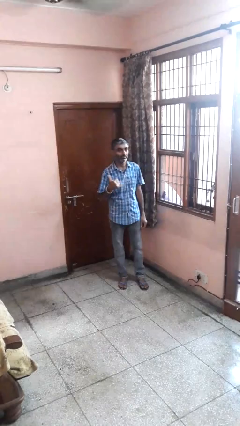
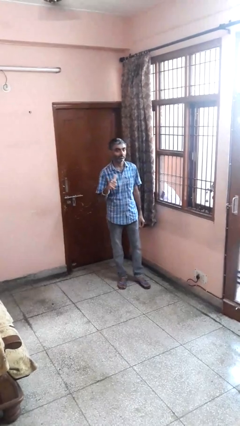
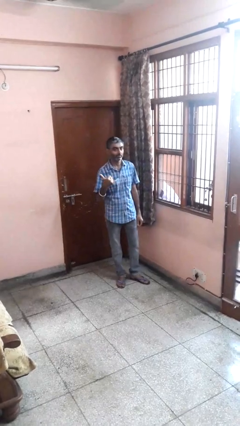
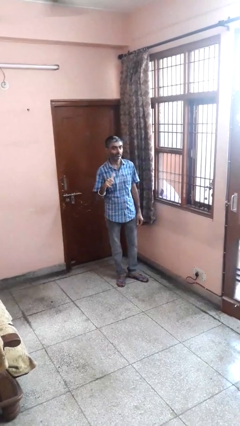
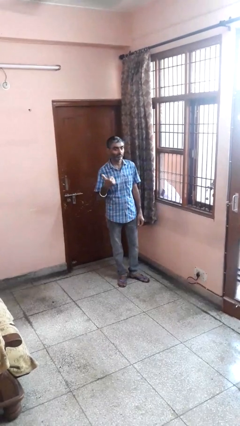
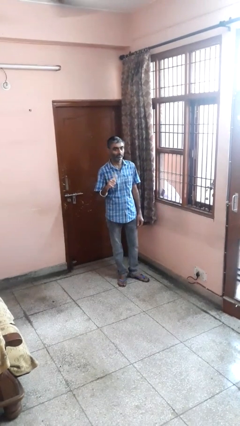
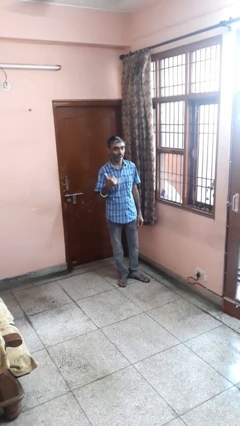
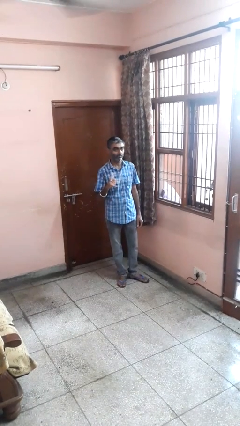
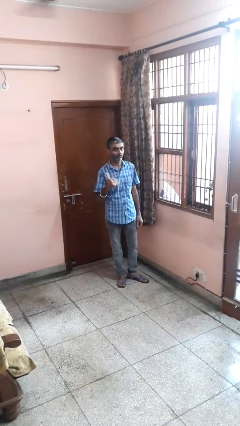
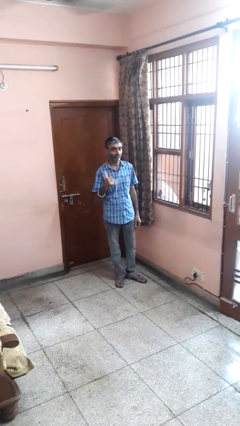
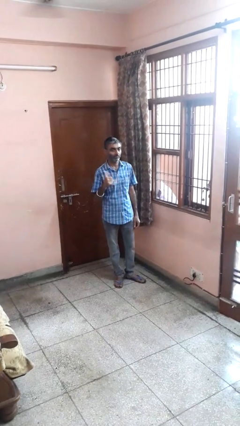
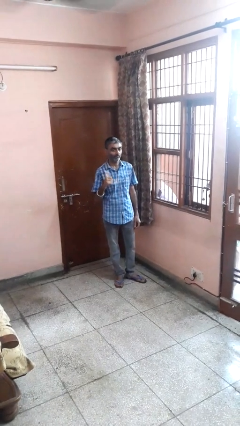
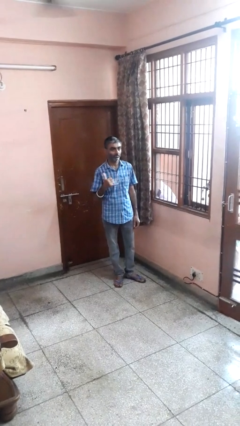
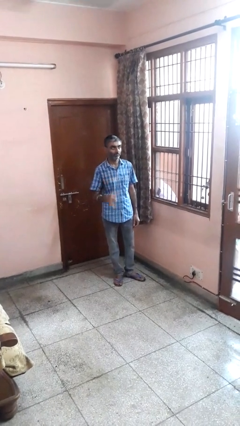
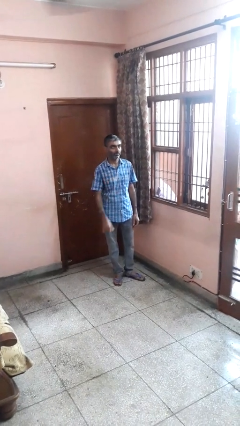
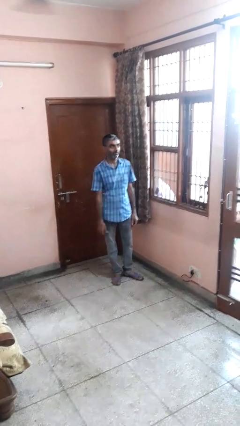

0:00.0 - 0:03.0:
person gestures hang loose

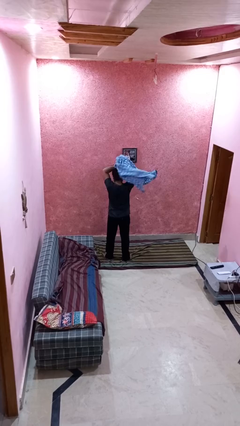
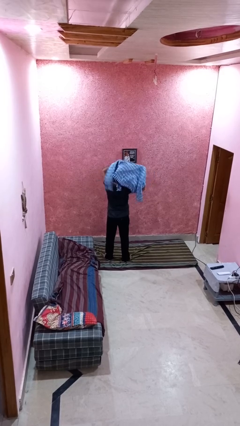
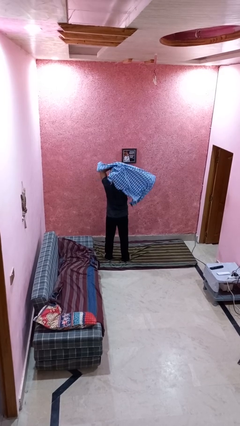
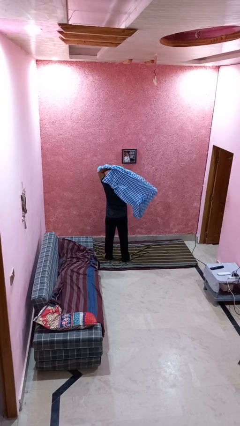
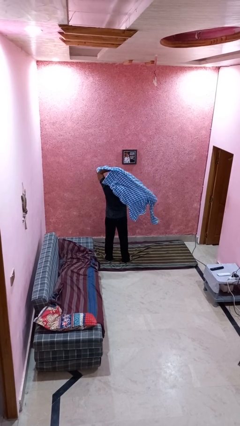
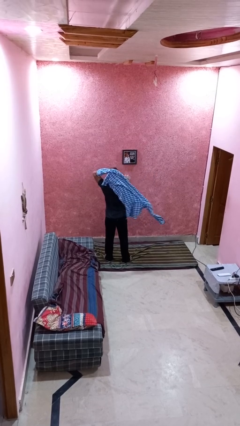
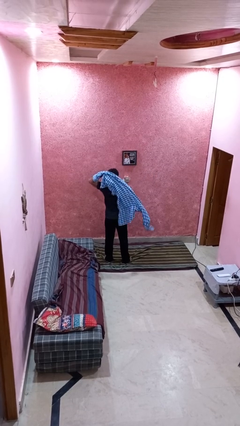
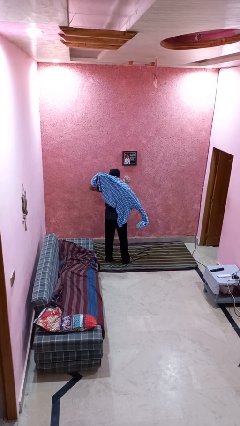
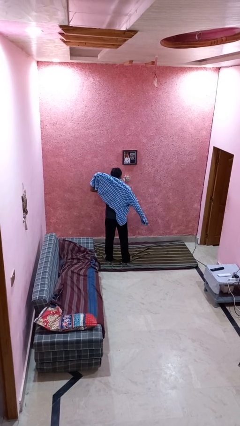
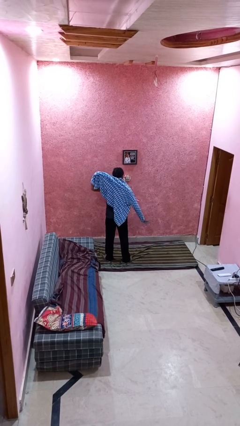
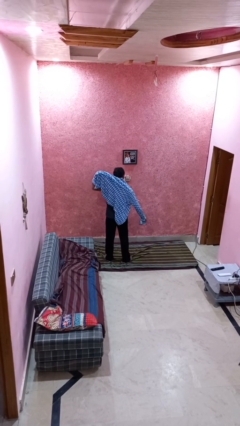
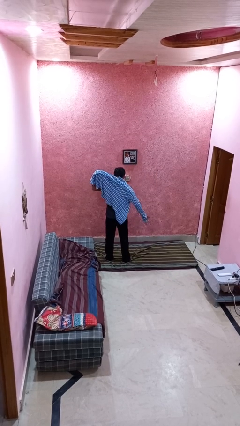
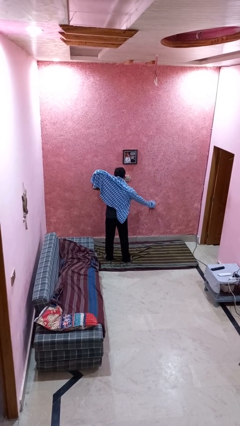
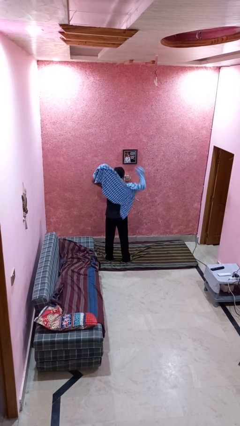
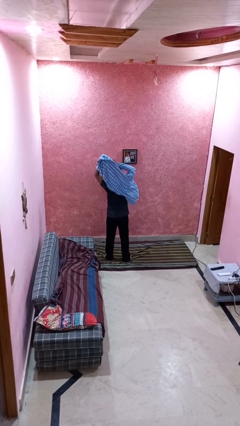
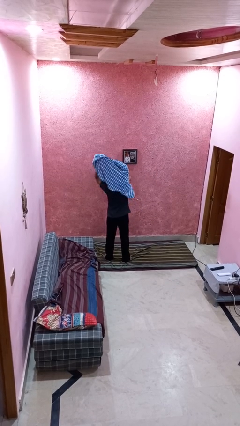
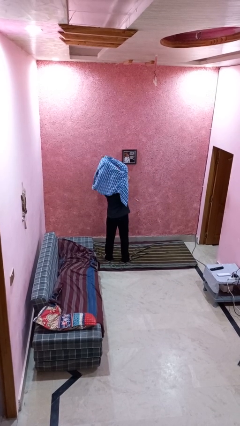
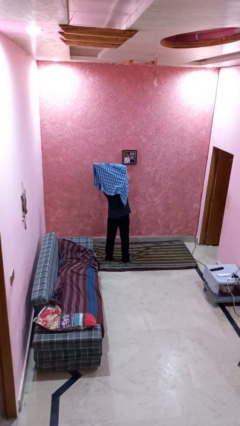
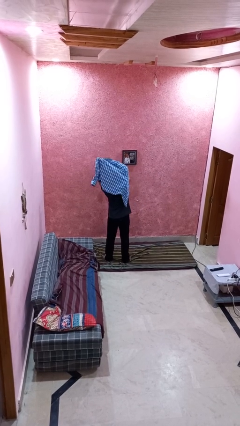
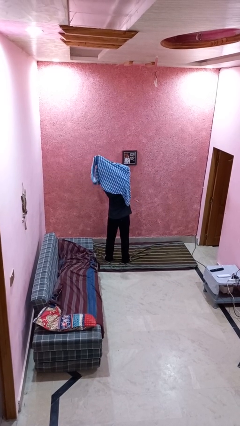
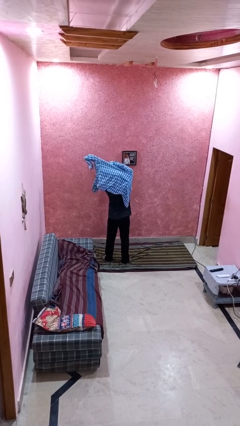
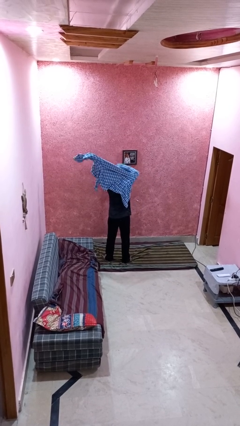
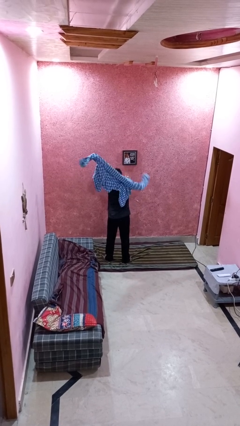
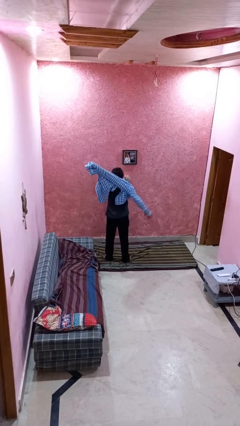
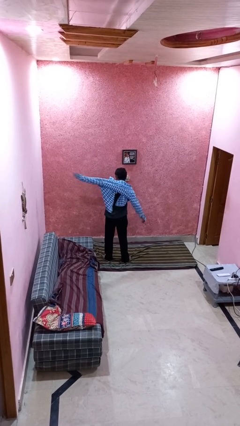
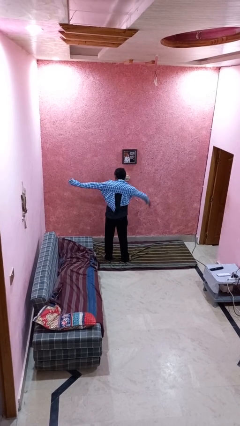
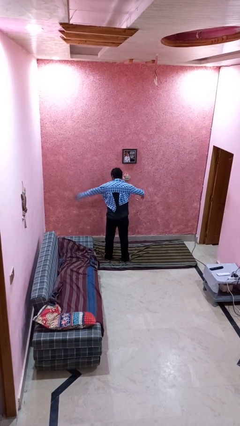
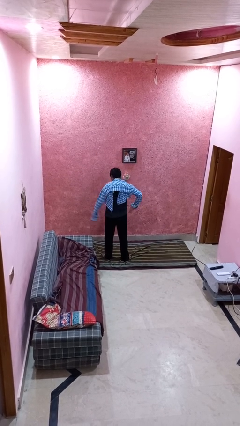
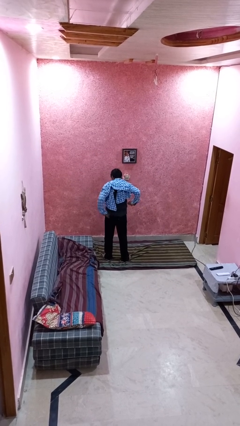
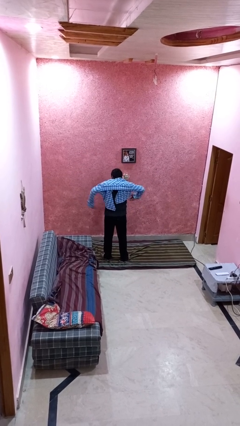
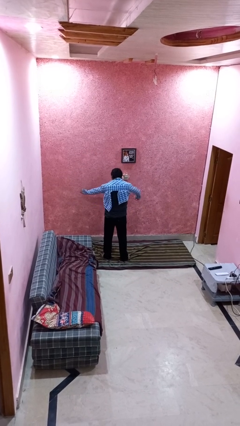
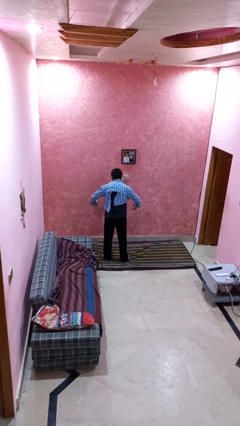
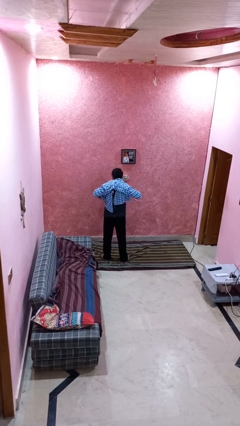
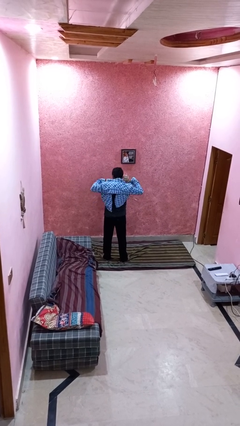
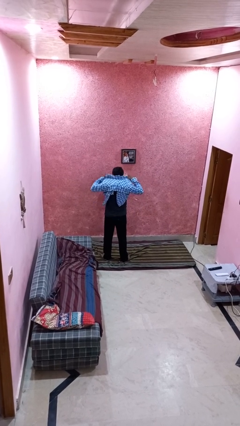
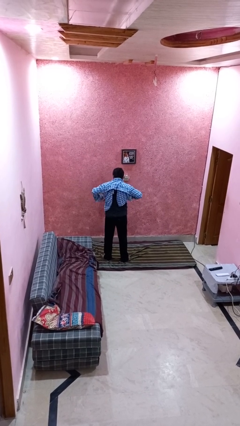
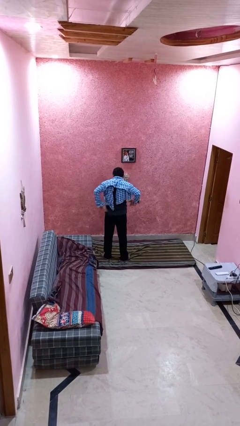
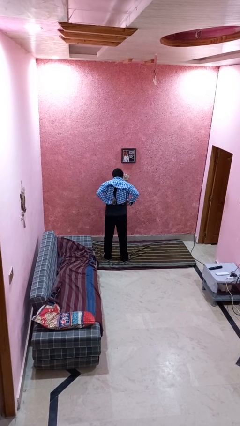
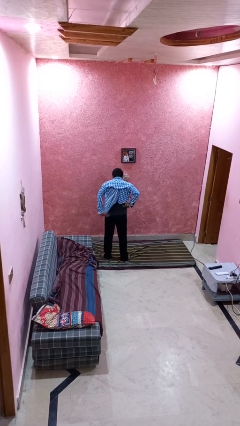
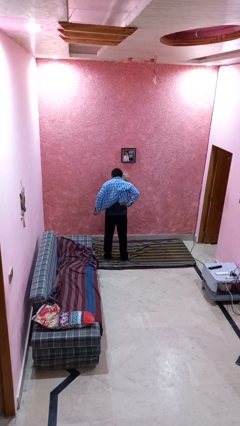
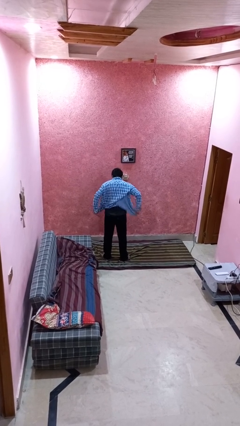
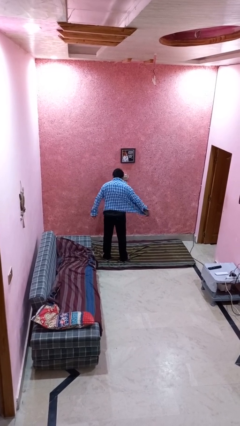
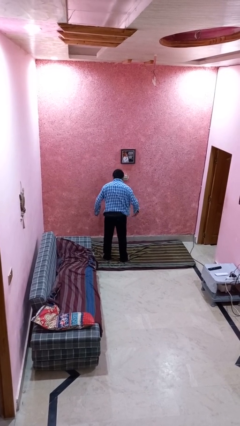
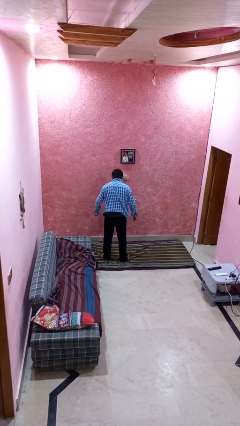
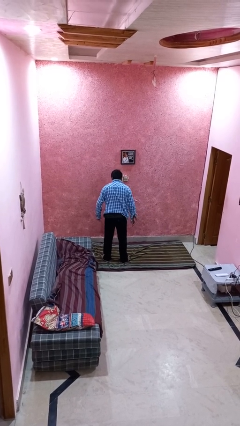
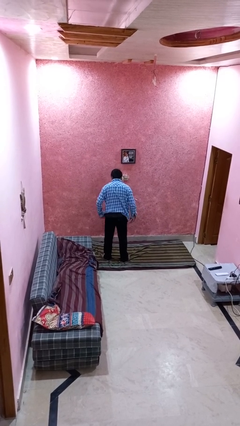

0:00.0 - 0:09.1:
person puts on shirt

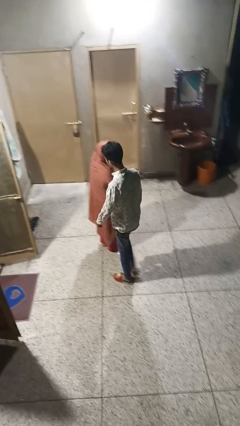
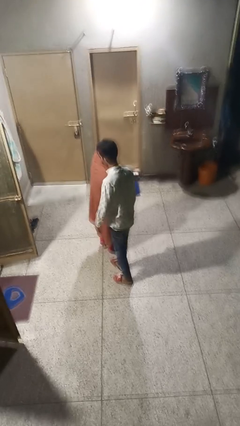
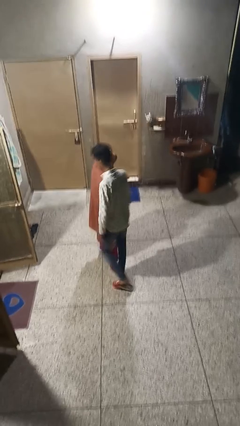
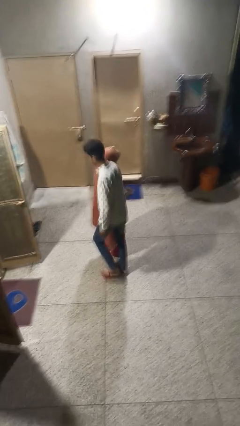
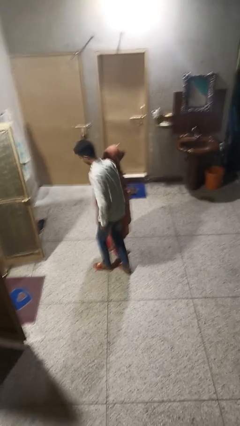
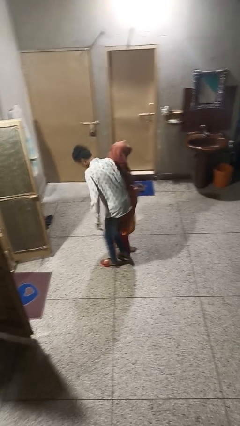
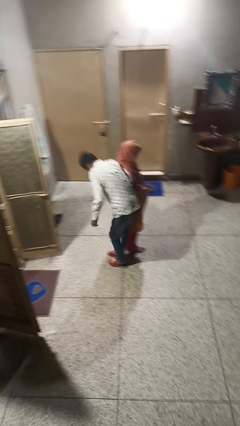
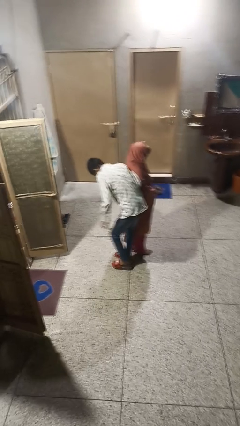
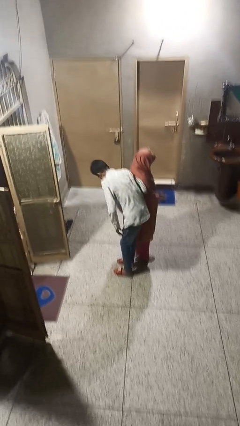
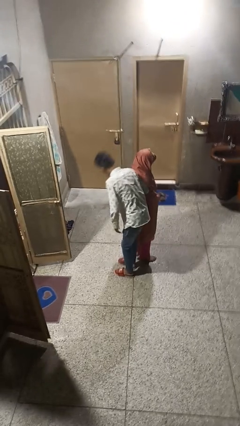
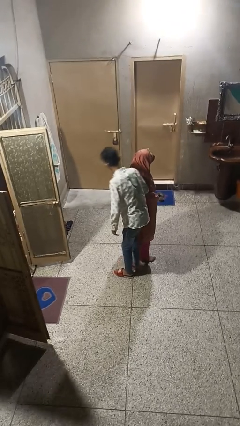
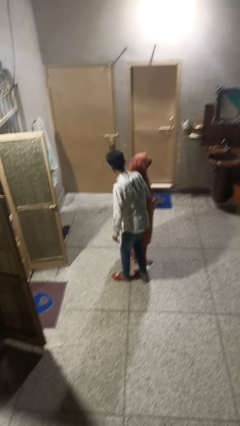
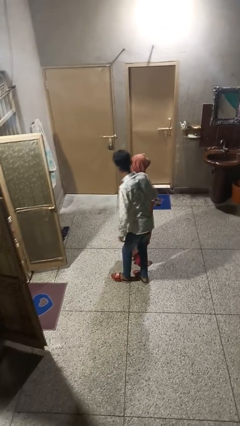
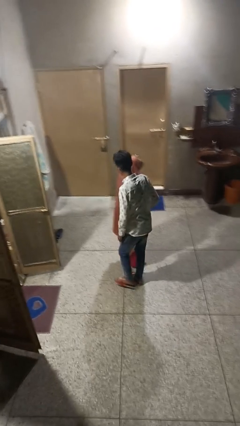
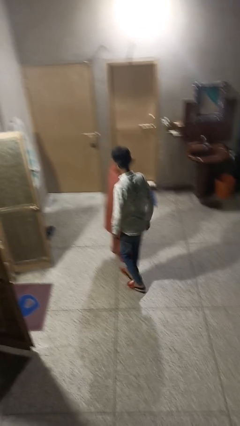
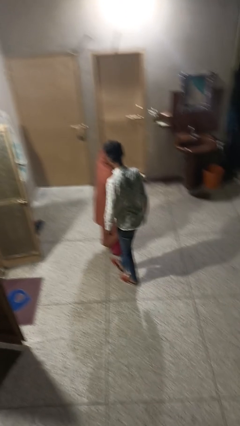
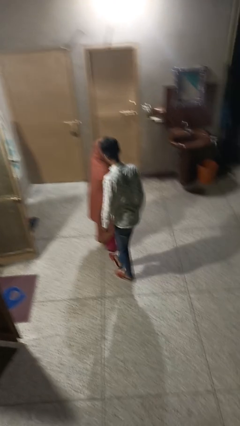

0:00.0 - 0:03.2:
person bumps into person

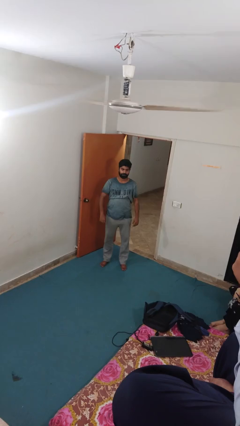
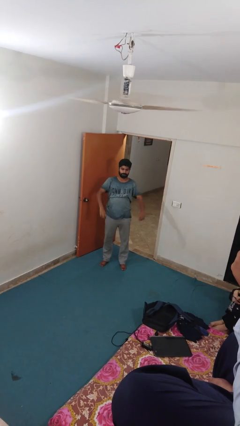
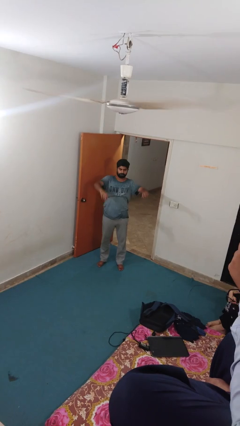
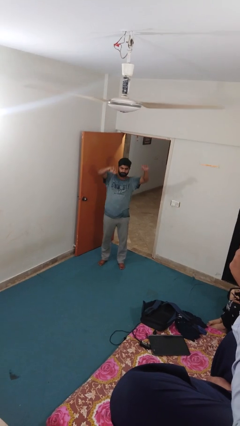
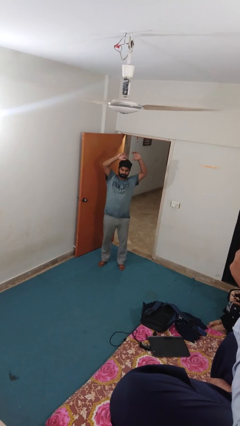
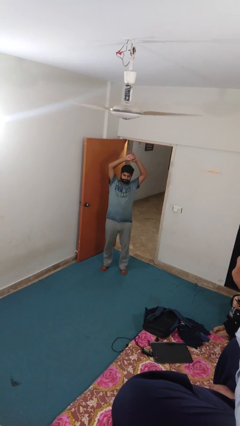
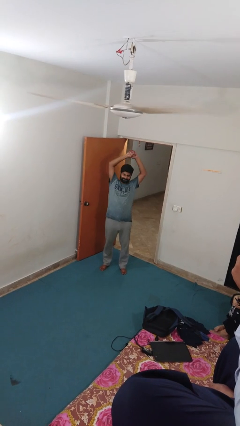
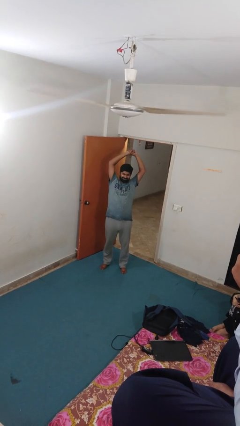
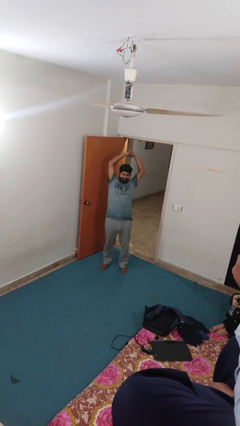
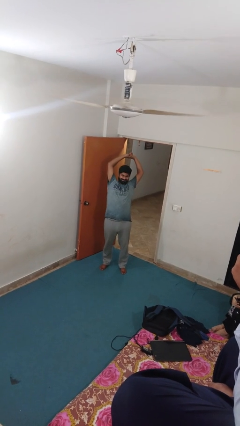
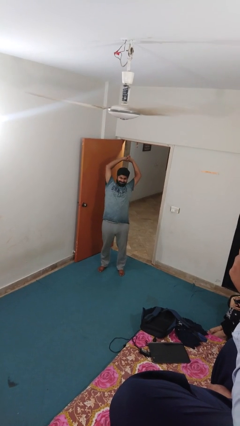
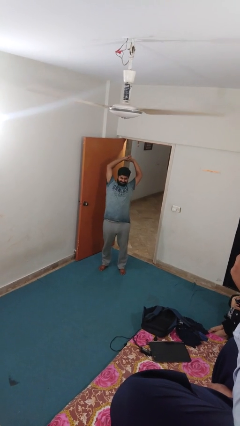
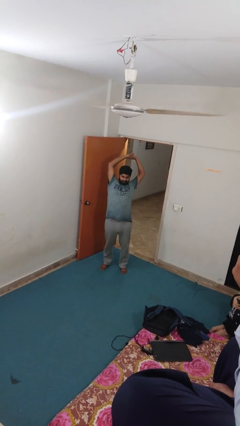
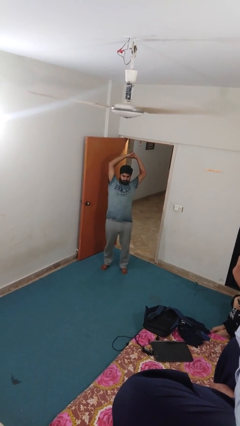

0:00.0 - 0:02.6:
person stretches arms over head
